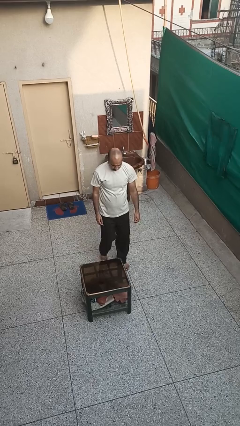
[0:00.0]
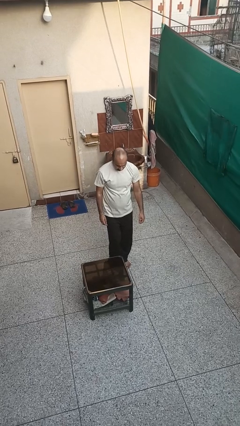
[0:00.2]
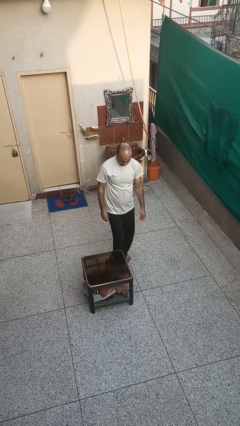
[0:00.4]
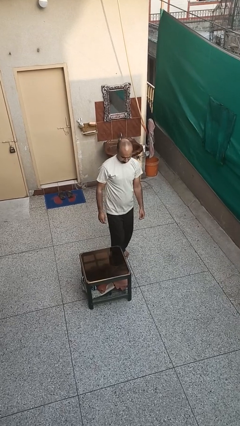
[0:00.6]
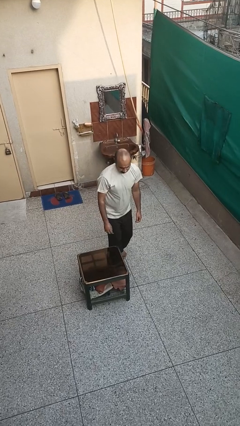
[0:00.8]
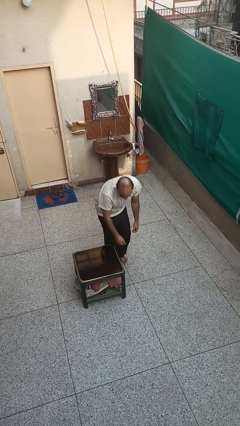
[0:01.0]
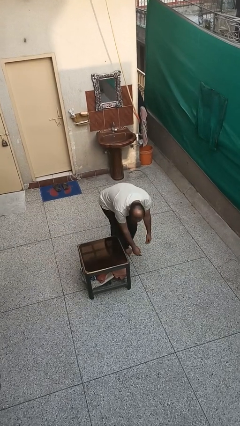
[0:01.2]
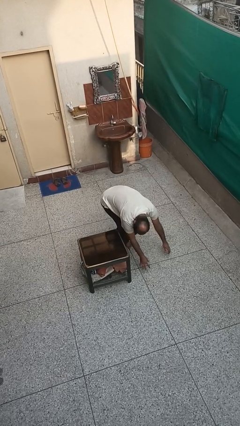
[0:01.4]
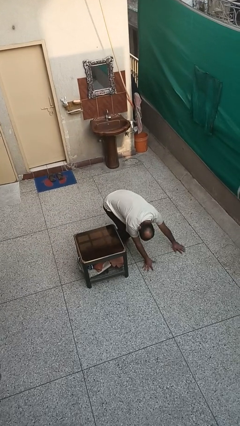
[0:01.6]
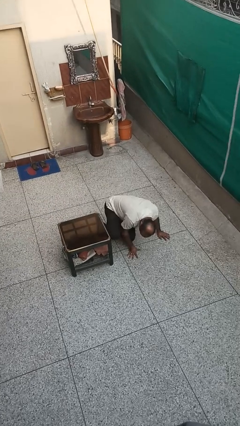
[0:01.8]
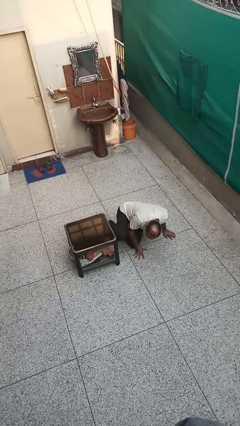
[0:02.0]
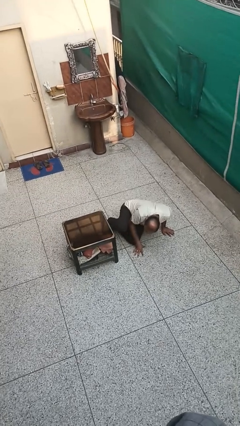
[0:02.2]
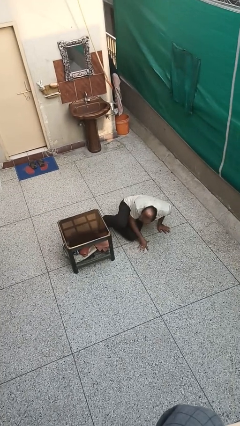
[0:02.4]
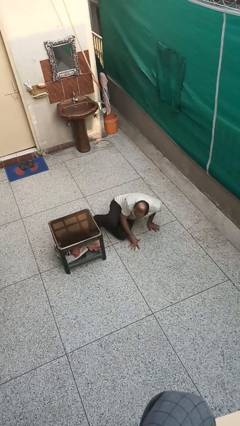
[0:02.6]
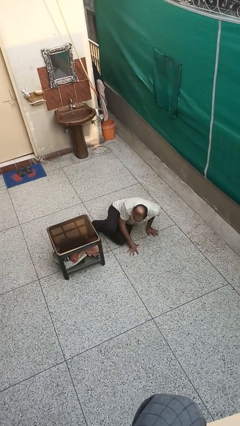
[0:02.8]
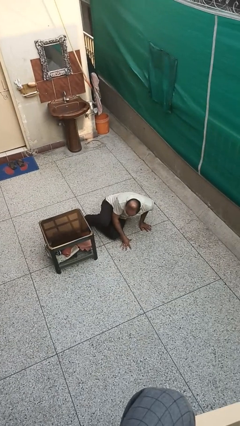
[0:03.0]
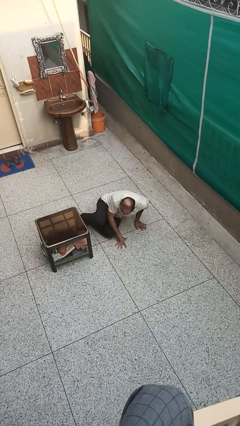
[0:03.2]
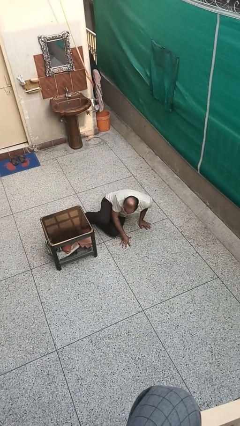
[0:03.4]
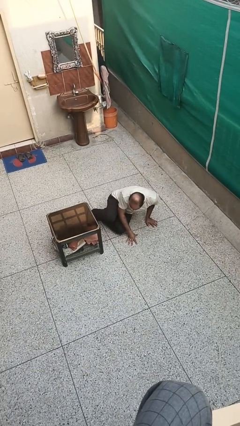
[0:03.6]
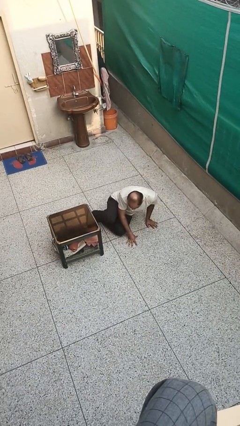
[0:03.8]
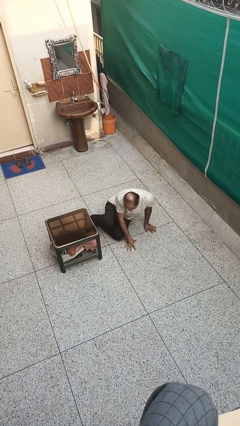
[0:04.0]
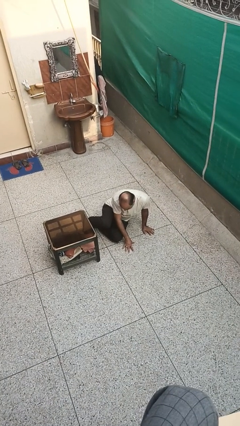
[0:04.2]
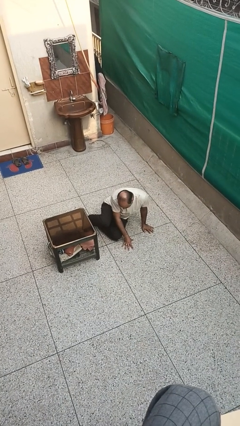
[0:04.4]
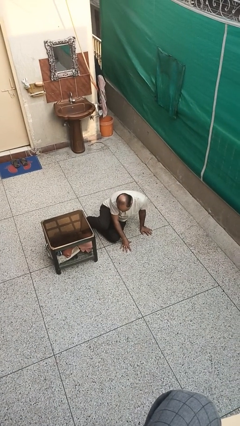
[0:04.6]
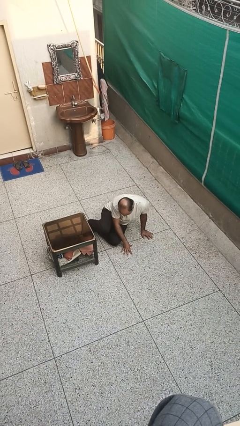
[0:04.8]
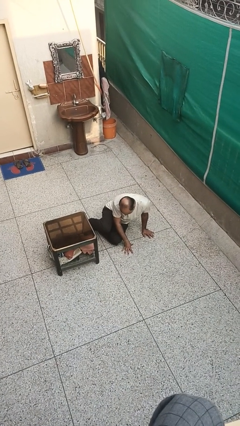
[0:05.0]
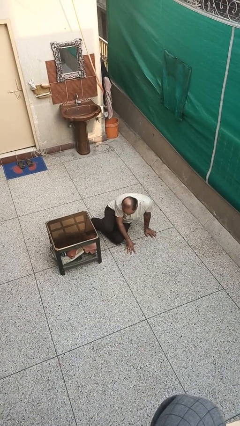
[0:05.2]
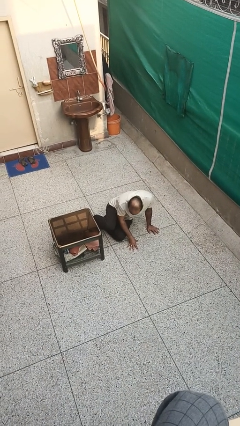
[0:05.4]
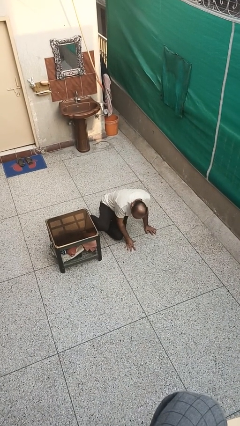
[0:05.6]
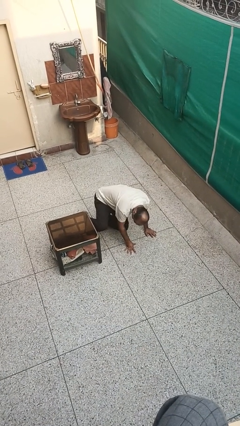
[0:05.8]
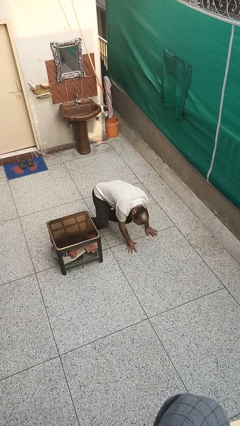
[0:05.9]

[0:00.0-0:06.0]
person bumps into table

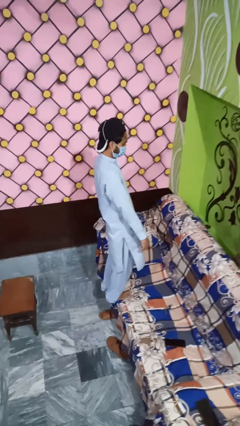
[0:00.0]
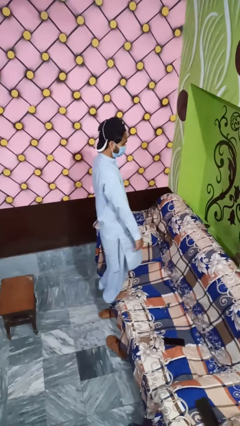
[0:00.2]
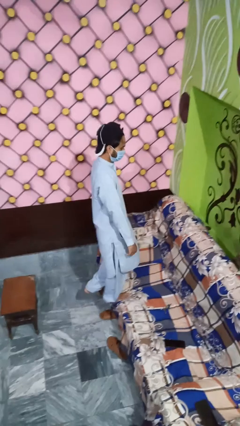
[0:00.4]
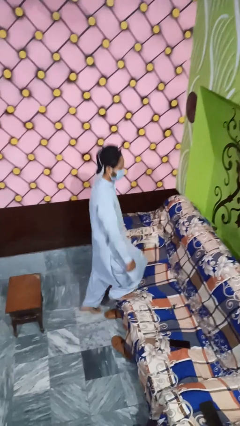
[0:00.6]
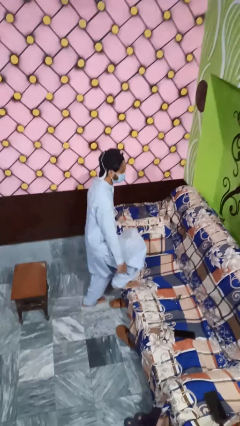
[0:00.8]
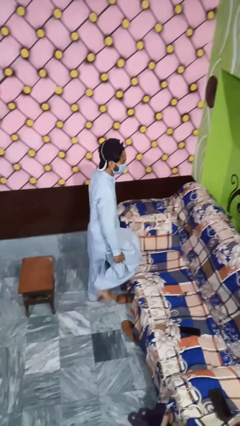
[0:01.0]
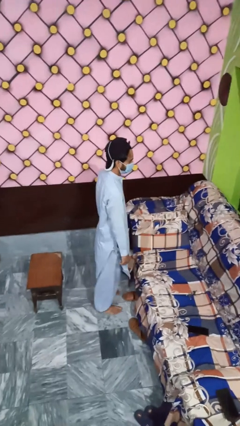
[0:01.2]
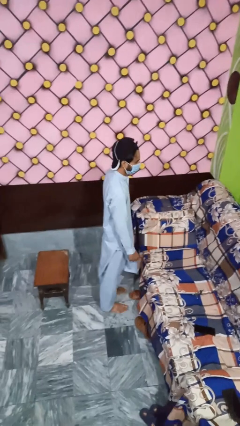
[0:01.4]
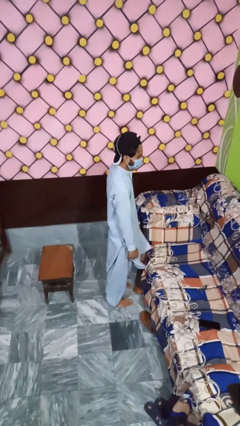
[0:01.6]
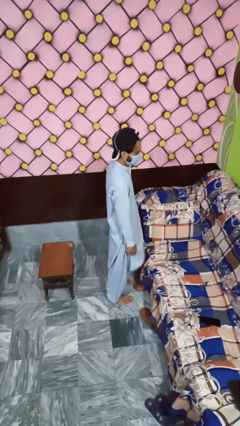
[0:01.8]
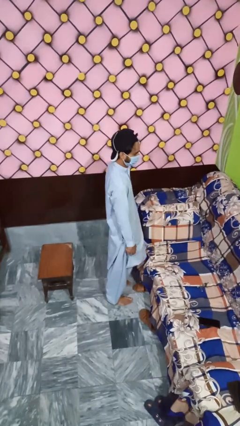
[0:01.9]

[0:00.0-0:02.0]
person climbs off couch

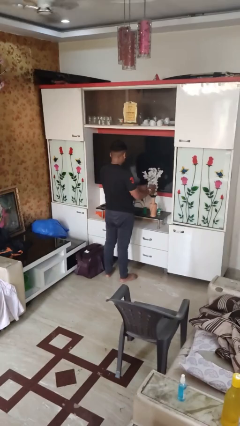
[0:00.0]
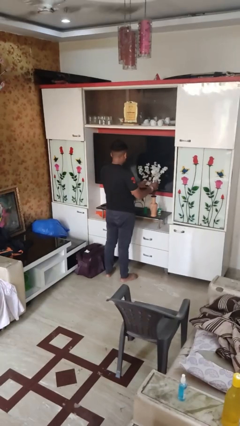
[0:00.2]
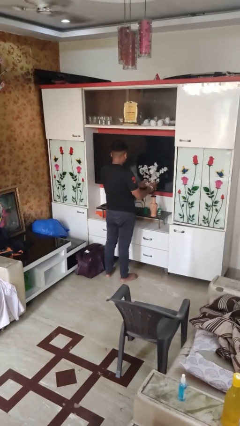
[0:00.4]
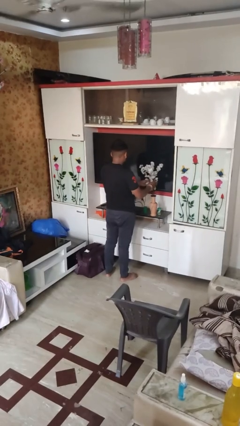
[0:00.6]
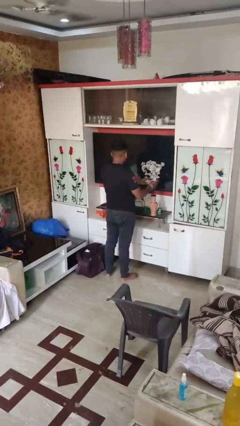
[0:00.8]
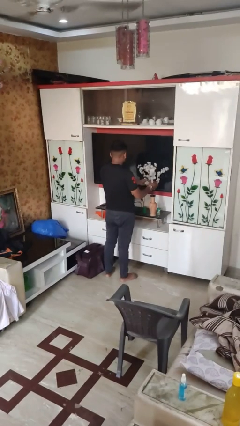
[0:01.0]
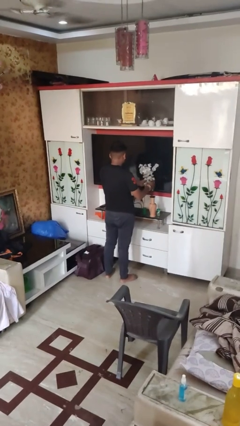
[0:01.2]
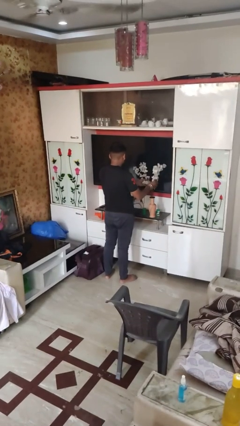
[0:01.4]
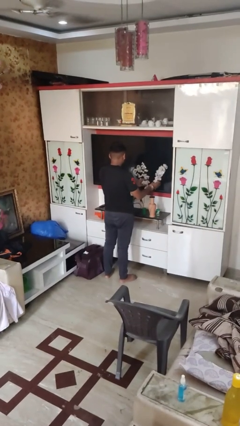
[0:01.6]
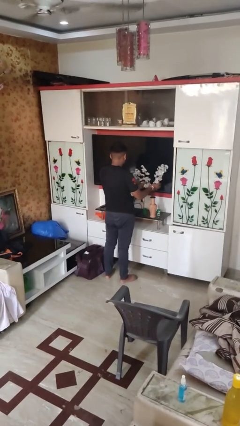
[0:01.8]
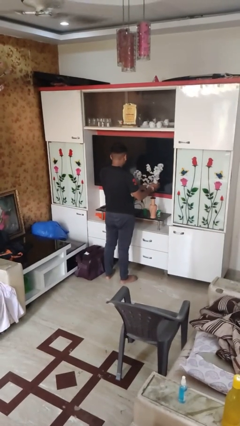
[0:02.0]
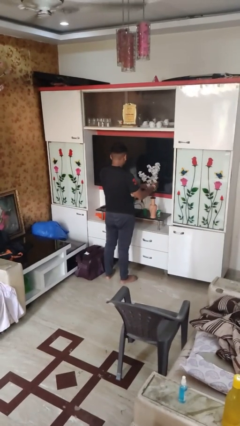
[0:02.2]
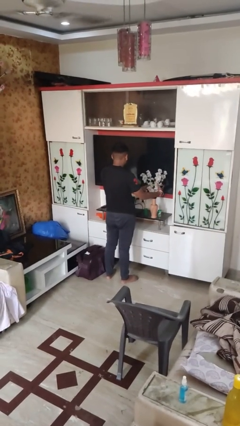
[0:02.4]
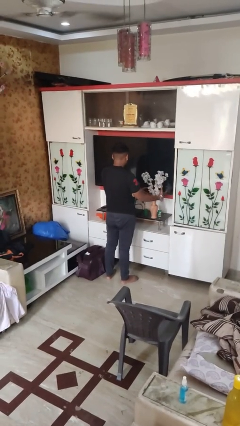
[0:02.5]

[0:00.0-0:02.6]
person arranges flowers in vase

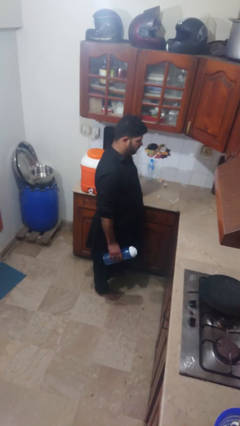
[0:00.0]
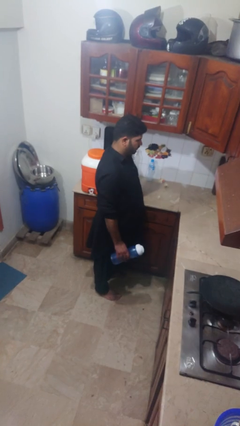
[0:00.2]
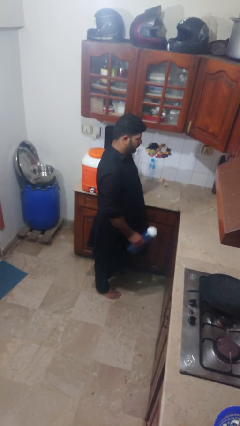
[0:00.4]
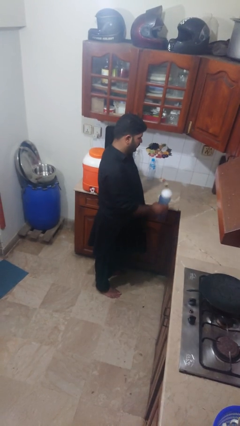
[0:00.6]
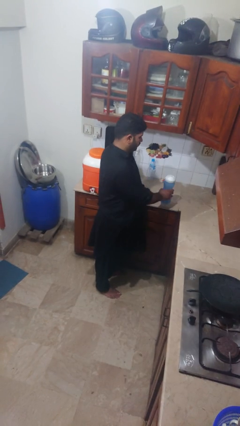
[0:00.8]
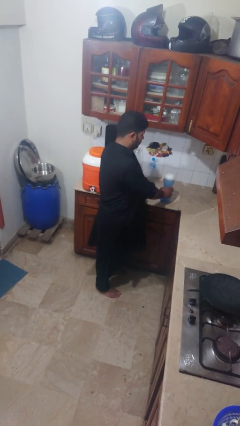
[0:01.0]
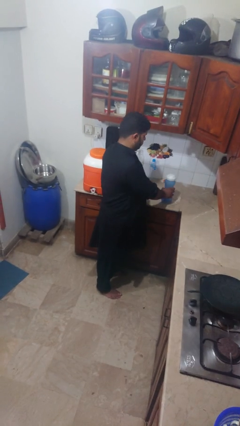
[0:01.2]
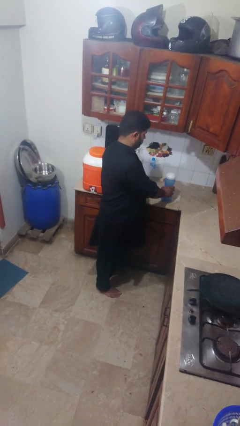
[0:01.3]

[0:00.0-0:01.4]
person puts down object on countertop

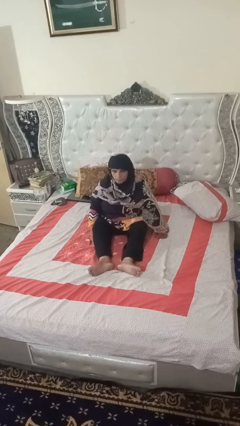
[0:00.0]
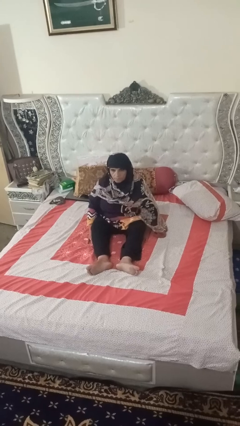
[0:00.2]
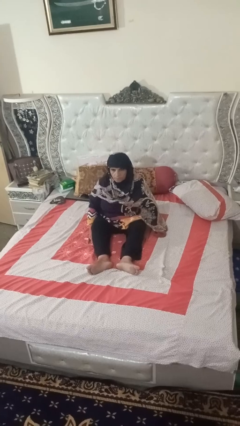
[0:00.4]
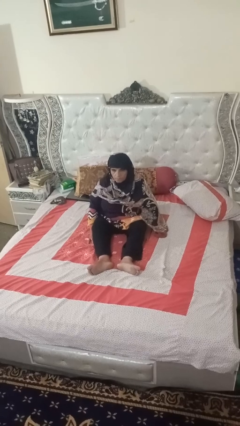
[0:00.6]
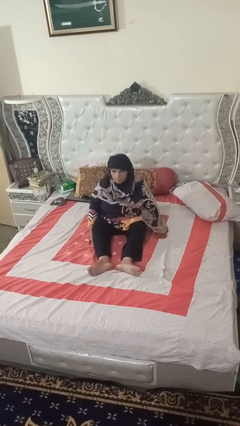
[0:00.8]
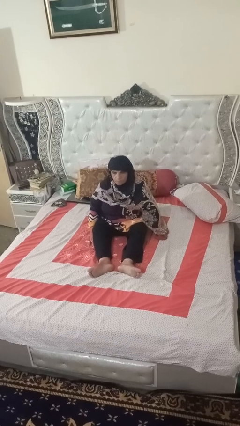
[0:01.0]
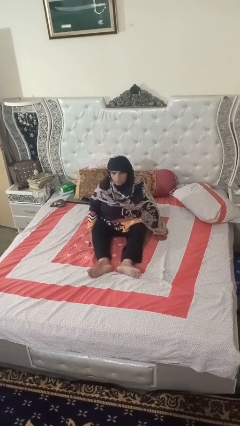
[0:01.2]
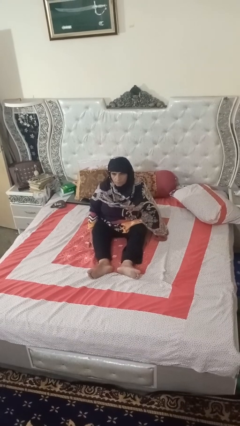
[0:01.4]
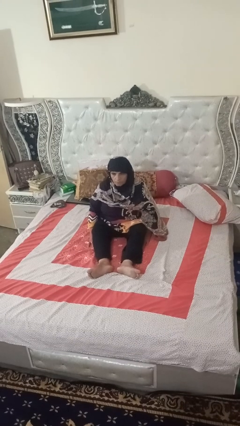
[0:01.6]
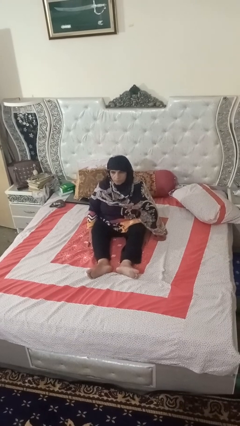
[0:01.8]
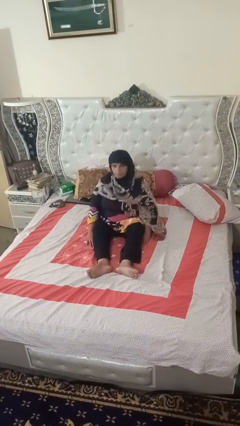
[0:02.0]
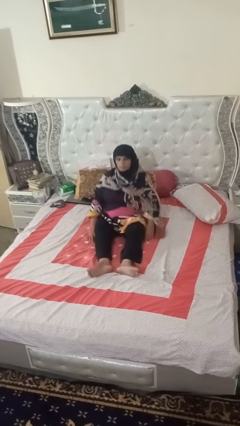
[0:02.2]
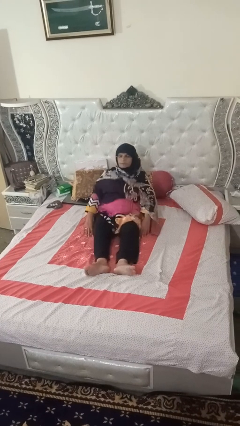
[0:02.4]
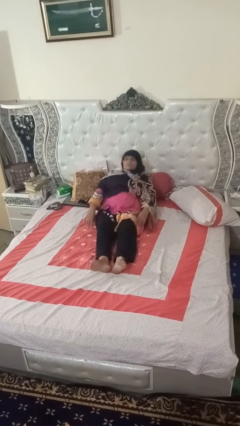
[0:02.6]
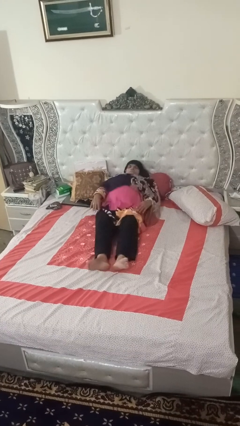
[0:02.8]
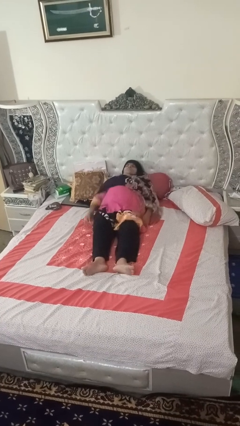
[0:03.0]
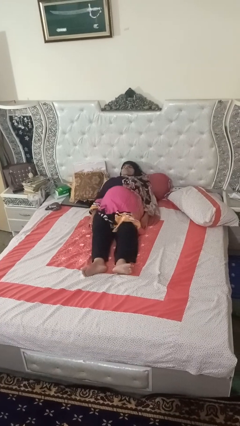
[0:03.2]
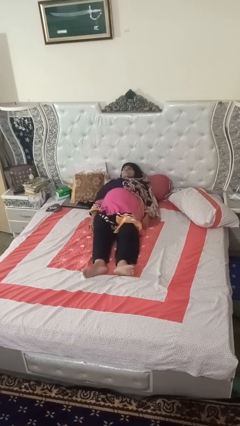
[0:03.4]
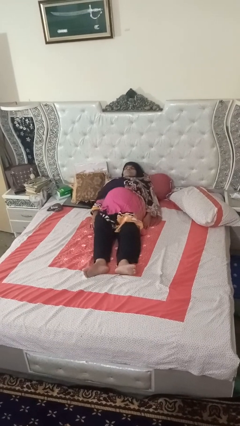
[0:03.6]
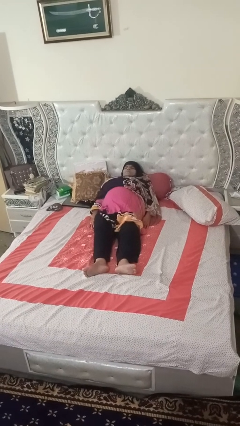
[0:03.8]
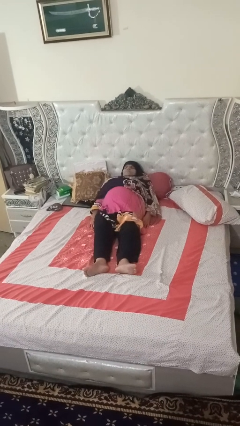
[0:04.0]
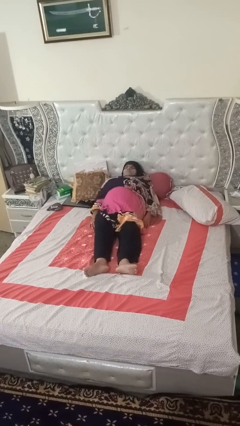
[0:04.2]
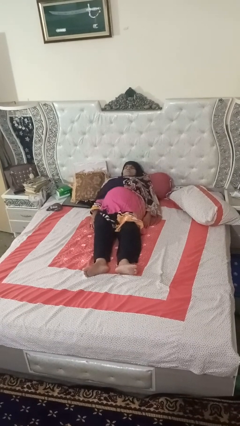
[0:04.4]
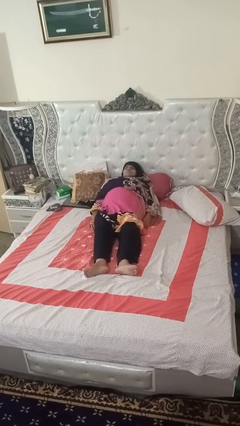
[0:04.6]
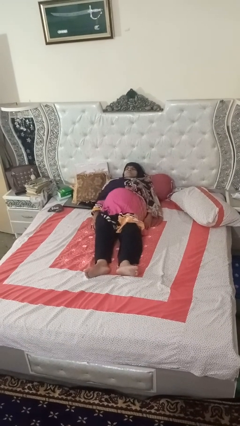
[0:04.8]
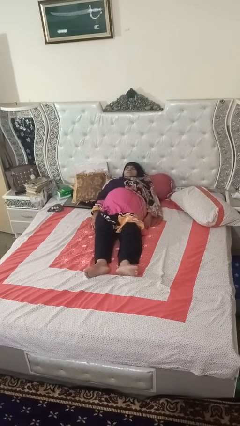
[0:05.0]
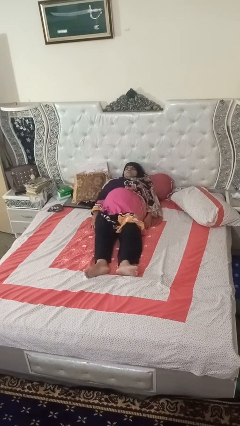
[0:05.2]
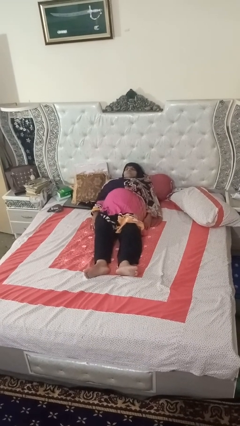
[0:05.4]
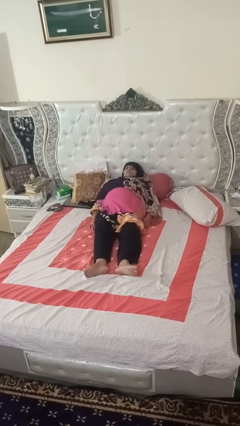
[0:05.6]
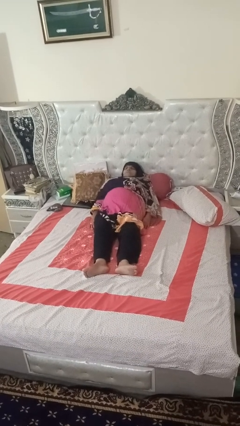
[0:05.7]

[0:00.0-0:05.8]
person lies down on bed
